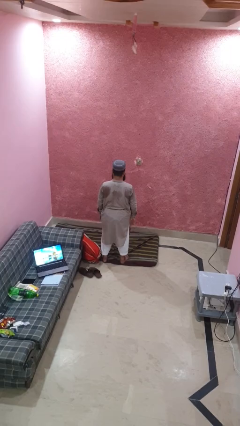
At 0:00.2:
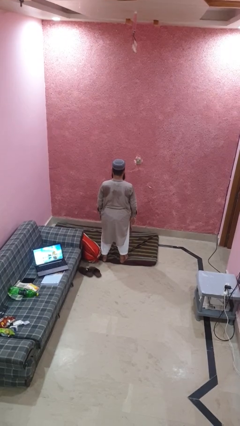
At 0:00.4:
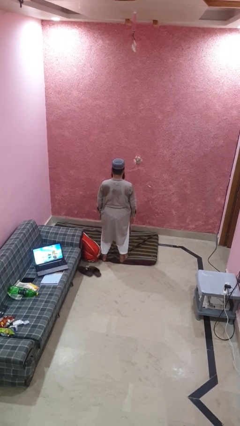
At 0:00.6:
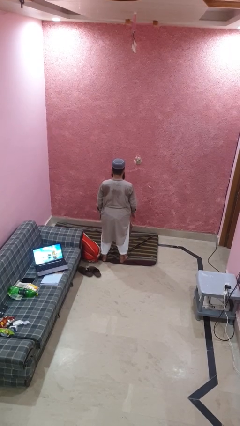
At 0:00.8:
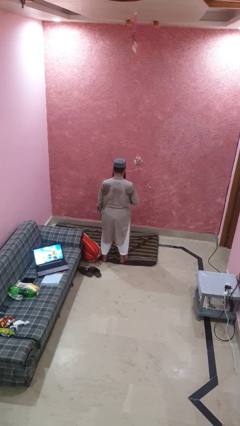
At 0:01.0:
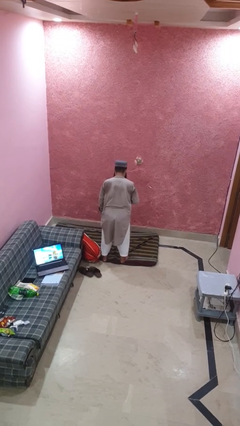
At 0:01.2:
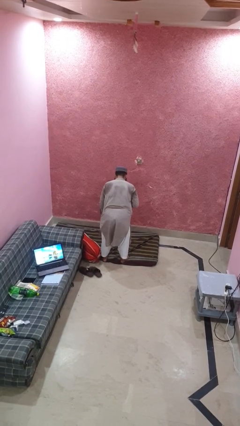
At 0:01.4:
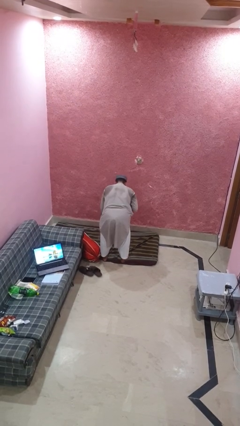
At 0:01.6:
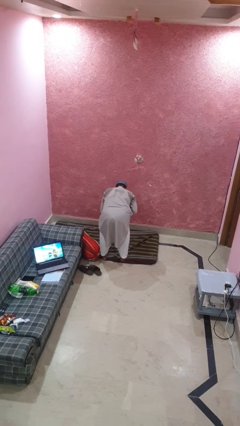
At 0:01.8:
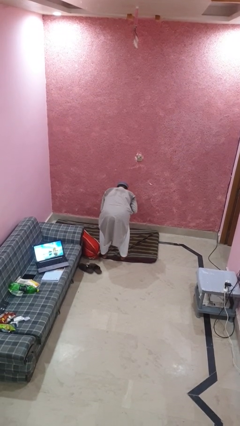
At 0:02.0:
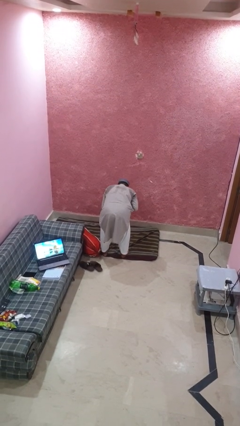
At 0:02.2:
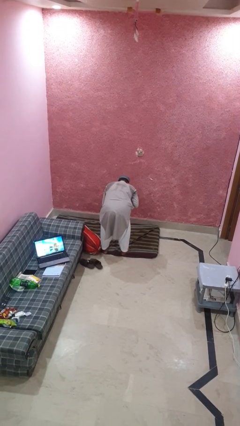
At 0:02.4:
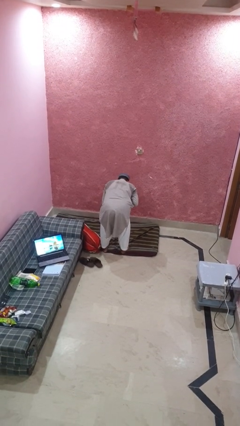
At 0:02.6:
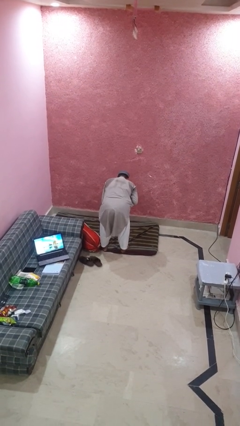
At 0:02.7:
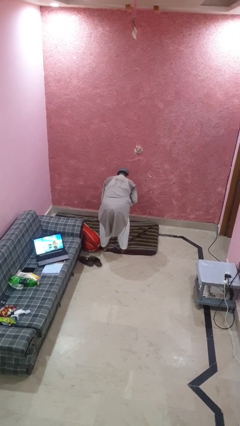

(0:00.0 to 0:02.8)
person bows

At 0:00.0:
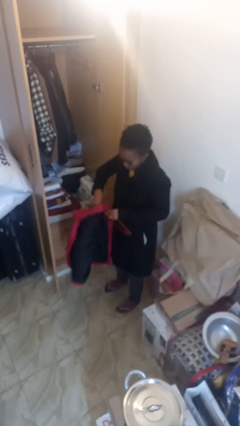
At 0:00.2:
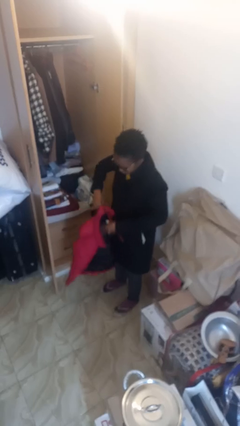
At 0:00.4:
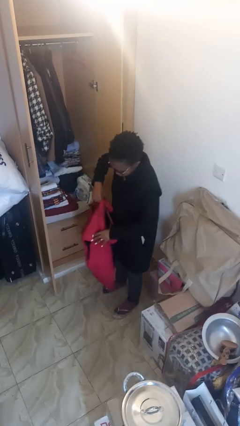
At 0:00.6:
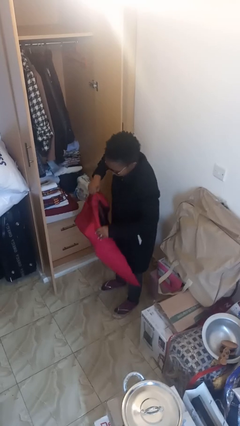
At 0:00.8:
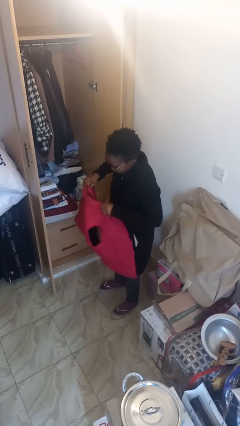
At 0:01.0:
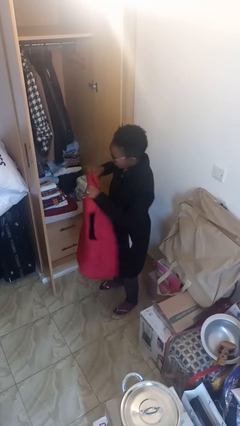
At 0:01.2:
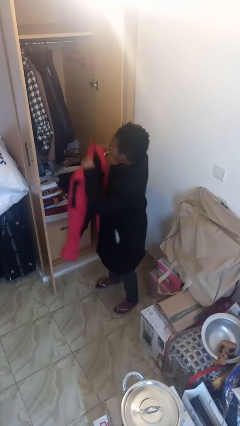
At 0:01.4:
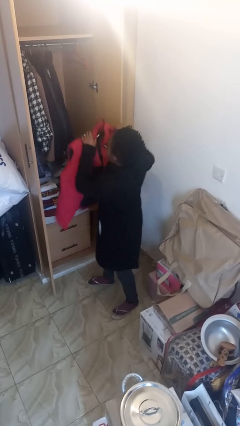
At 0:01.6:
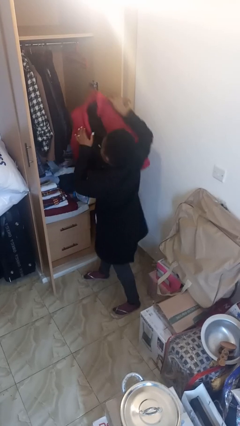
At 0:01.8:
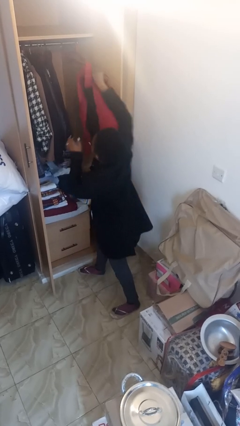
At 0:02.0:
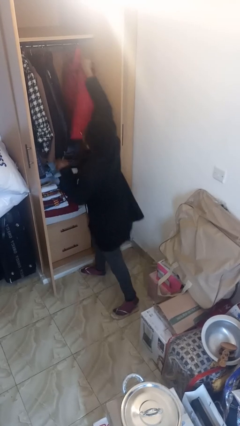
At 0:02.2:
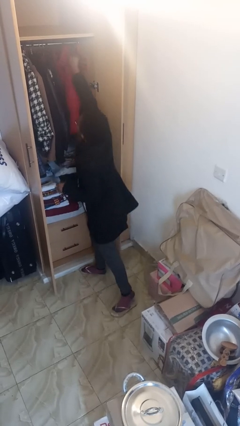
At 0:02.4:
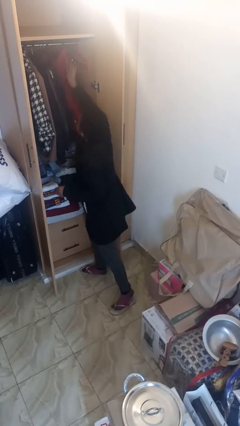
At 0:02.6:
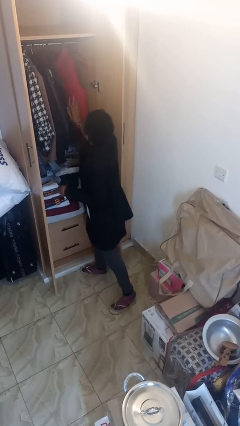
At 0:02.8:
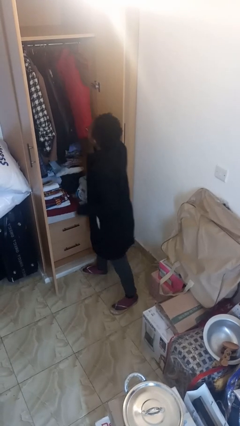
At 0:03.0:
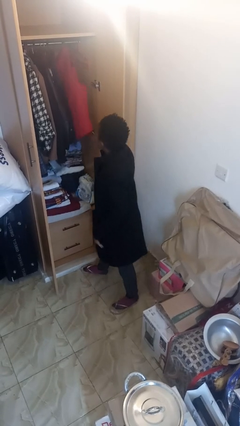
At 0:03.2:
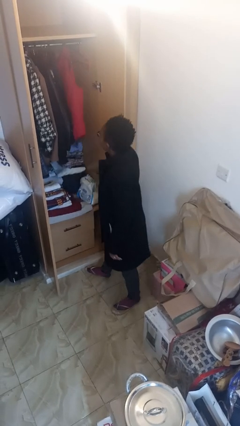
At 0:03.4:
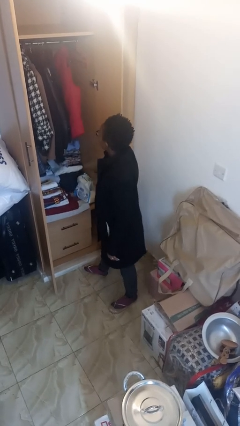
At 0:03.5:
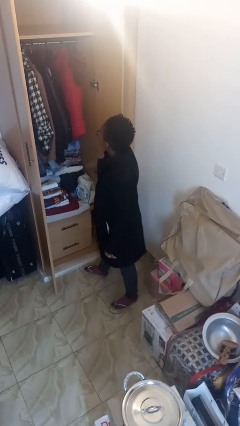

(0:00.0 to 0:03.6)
person puts clothes into closet

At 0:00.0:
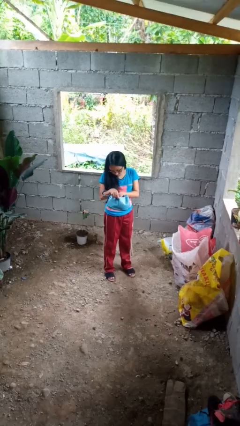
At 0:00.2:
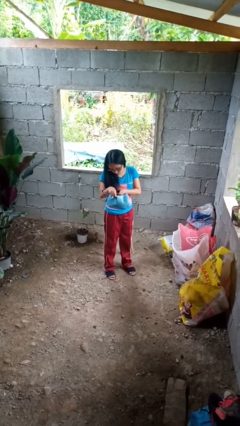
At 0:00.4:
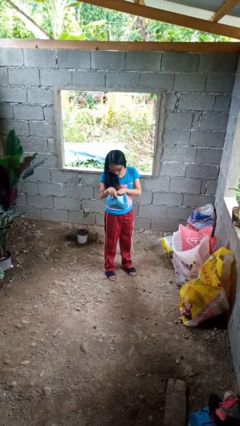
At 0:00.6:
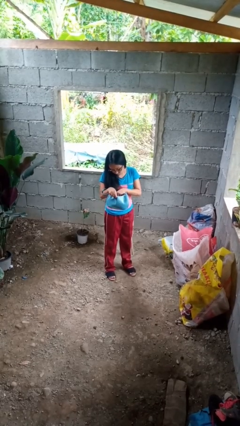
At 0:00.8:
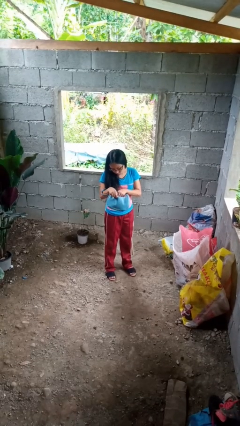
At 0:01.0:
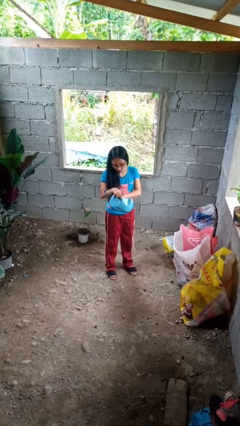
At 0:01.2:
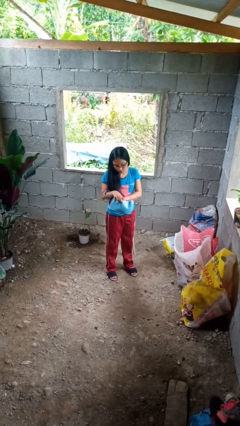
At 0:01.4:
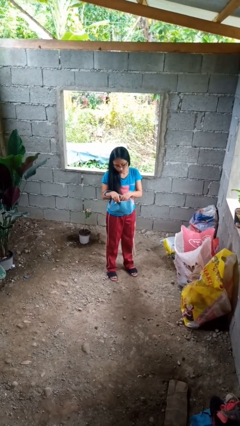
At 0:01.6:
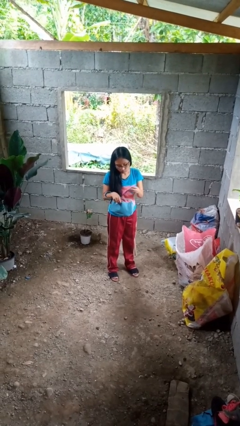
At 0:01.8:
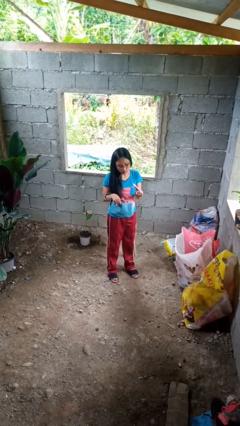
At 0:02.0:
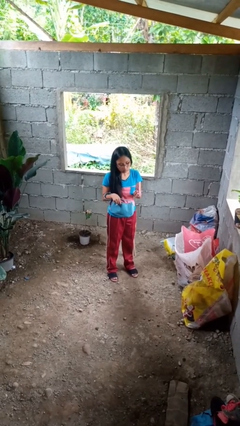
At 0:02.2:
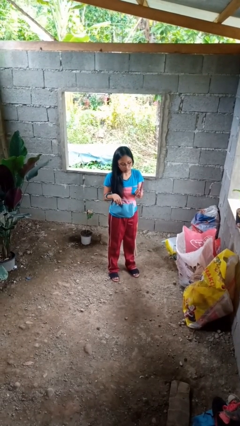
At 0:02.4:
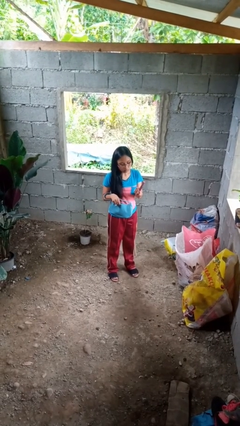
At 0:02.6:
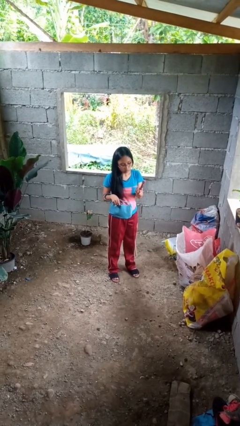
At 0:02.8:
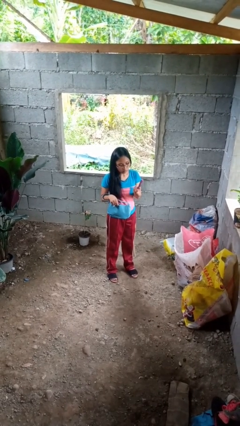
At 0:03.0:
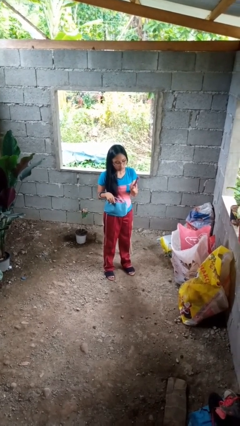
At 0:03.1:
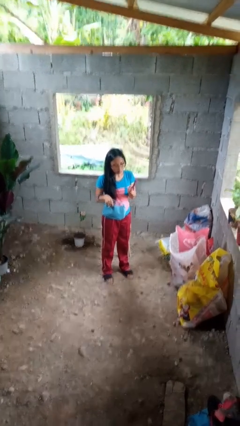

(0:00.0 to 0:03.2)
person takes object from purse

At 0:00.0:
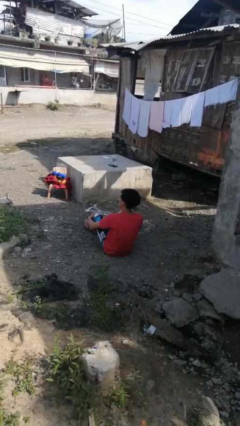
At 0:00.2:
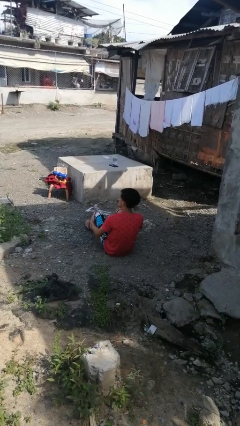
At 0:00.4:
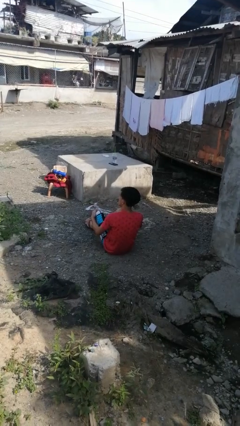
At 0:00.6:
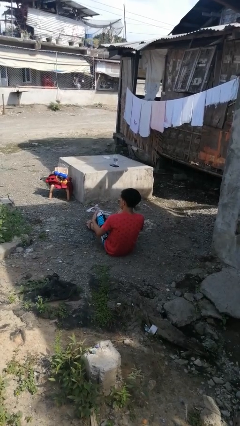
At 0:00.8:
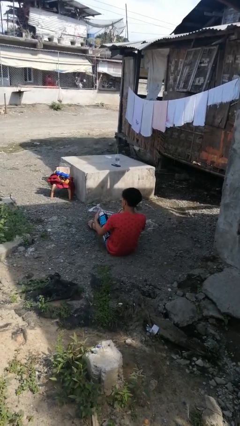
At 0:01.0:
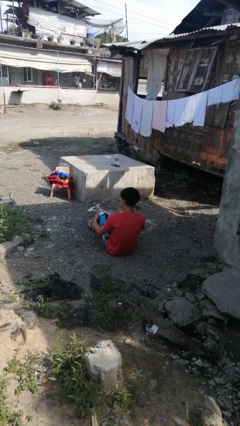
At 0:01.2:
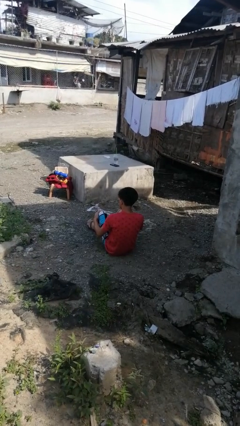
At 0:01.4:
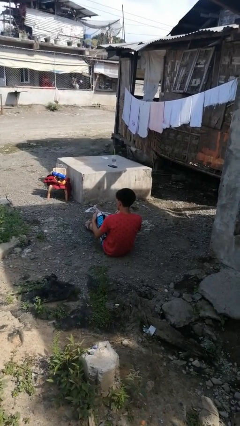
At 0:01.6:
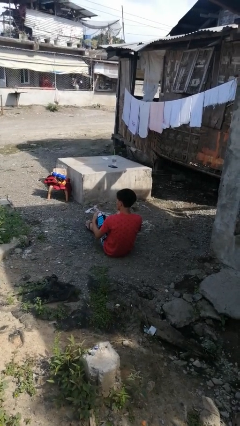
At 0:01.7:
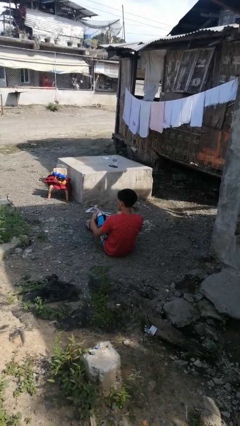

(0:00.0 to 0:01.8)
person lies down on floor

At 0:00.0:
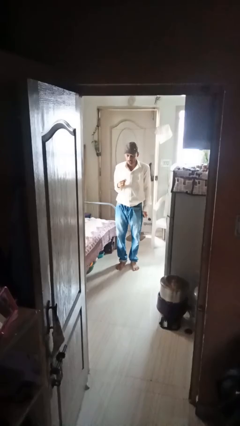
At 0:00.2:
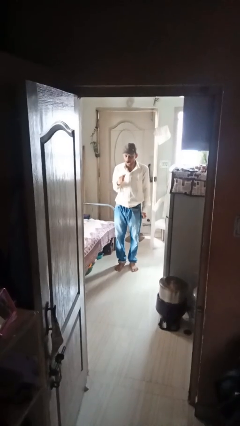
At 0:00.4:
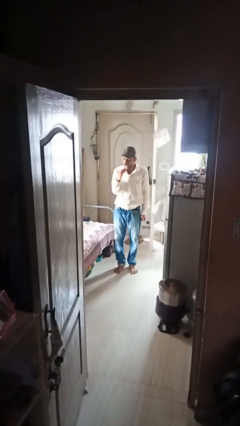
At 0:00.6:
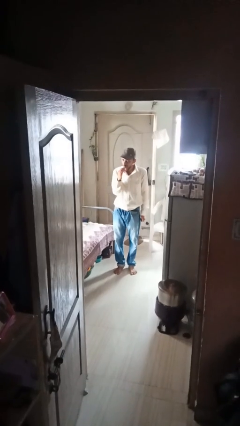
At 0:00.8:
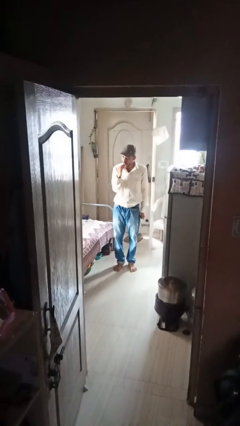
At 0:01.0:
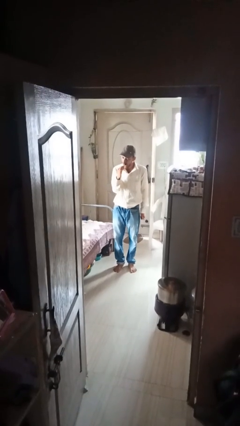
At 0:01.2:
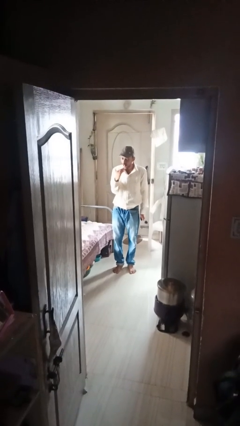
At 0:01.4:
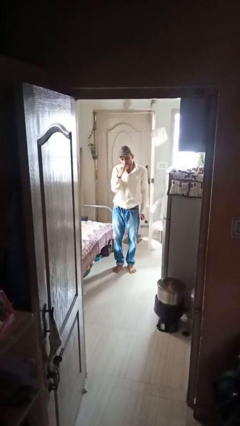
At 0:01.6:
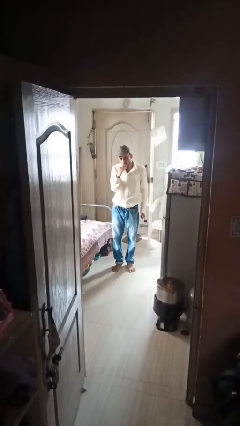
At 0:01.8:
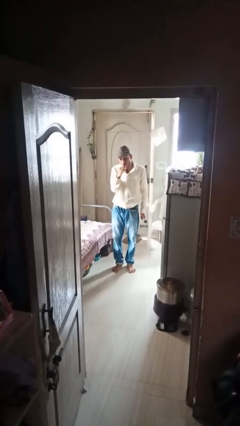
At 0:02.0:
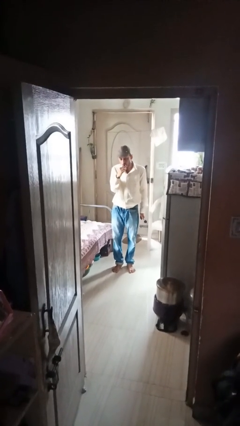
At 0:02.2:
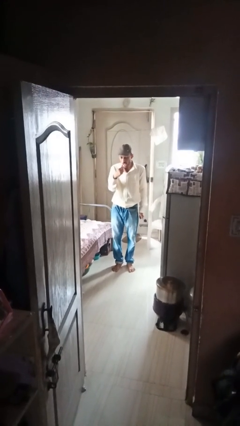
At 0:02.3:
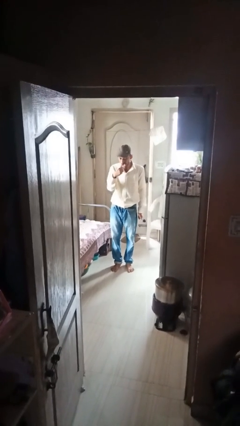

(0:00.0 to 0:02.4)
person brushes teeth

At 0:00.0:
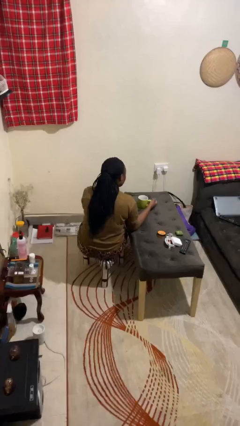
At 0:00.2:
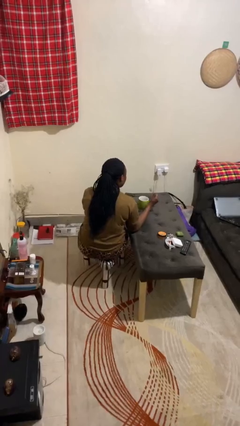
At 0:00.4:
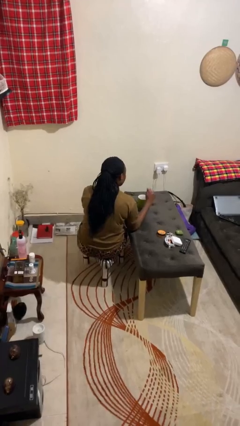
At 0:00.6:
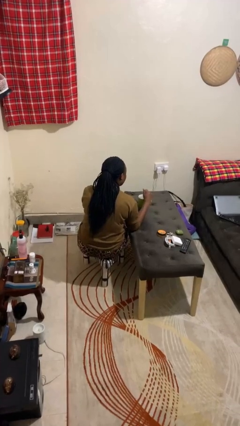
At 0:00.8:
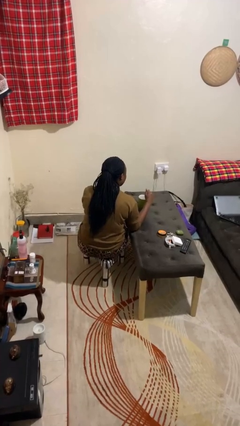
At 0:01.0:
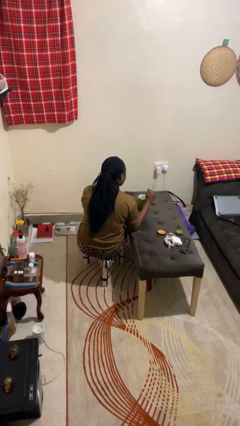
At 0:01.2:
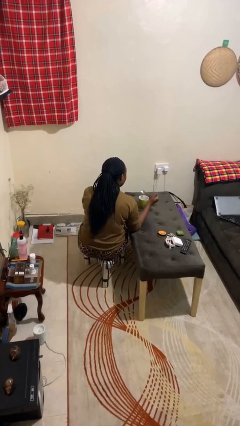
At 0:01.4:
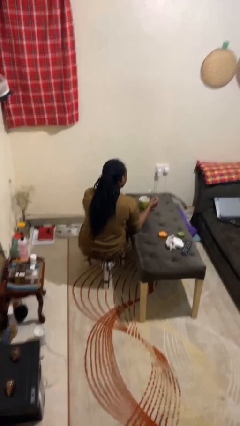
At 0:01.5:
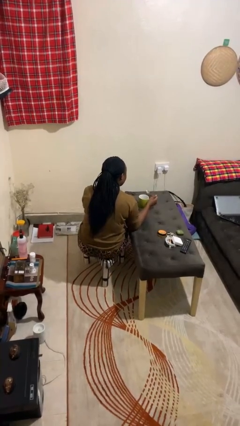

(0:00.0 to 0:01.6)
person stirs mug

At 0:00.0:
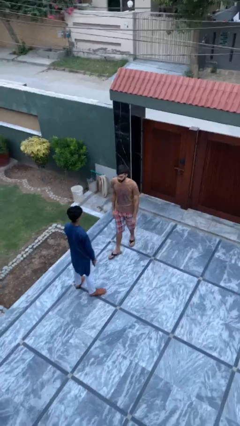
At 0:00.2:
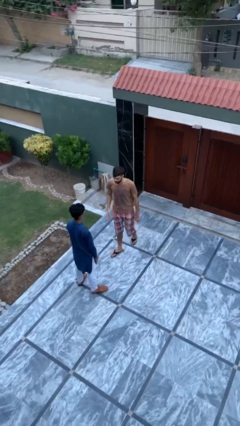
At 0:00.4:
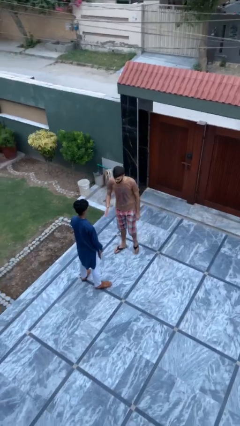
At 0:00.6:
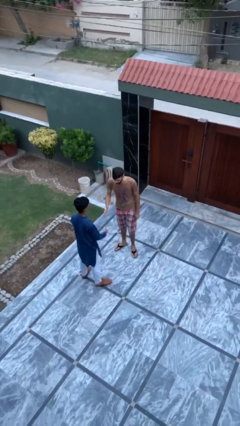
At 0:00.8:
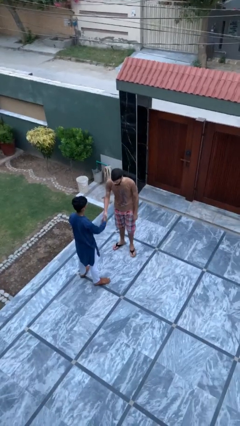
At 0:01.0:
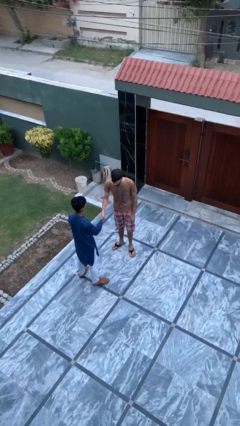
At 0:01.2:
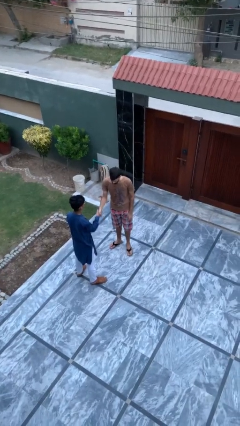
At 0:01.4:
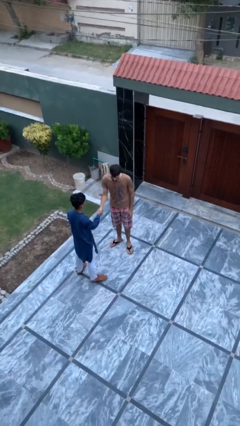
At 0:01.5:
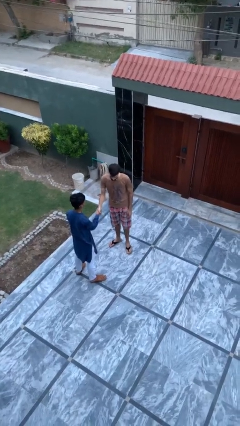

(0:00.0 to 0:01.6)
person shakes hand

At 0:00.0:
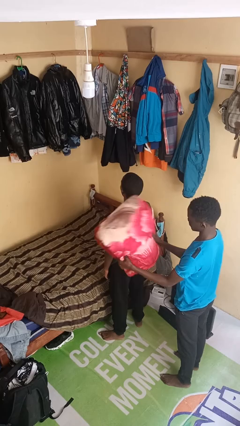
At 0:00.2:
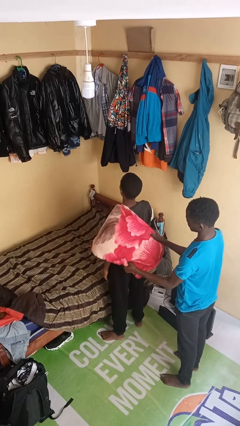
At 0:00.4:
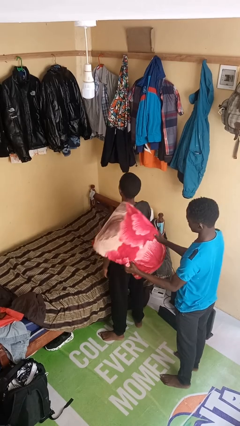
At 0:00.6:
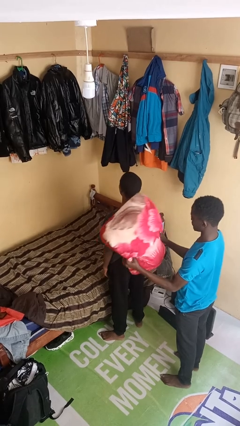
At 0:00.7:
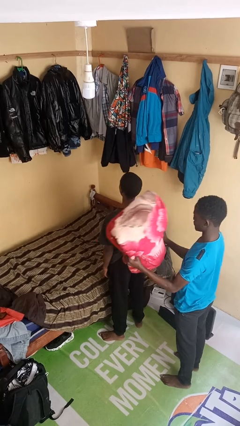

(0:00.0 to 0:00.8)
person hits person with pillow
